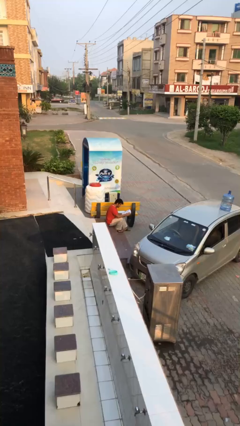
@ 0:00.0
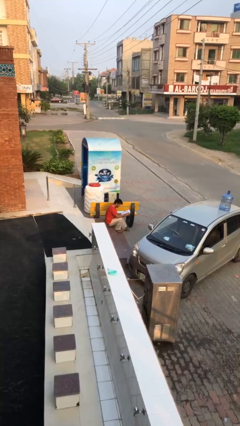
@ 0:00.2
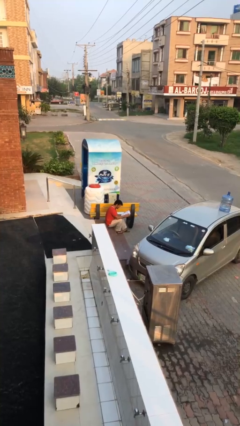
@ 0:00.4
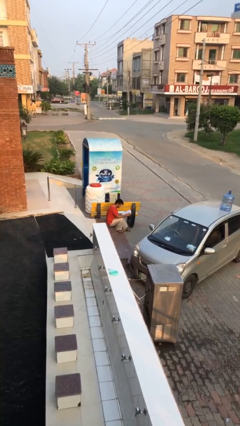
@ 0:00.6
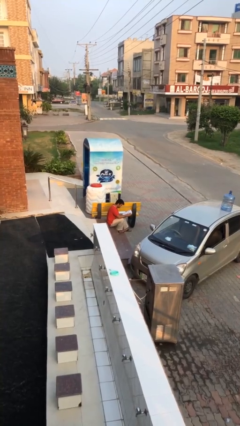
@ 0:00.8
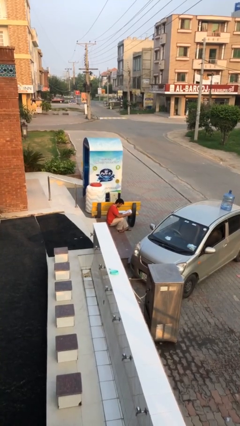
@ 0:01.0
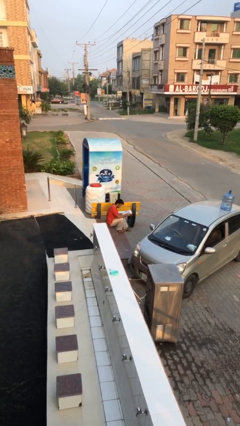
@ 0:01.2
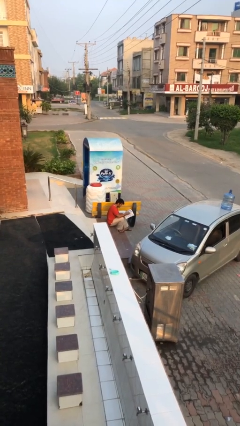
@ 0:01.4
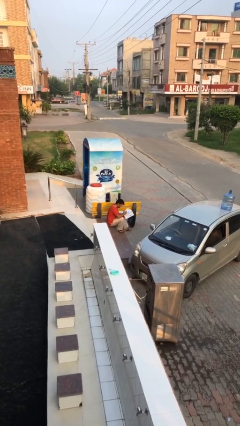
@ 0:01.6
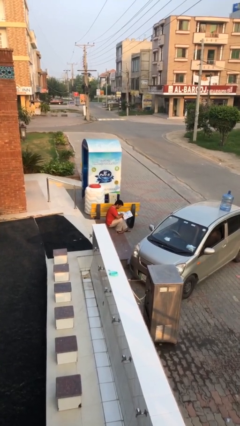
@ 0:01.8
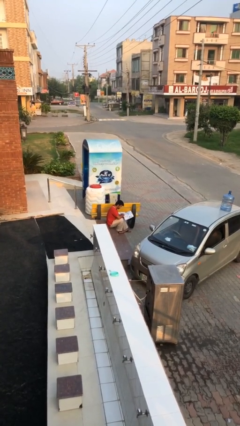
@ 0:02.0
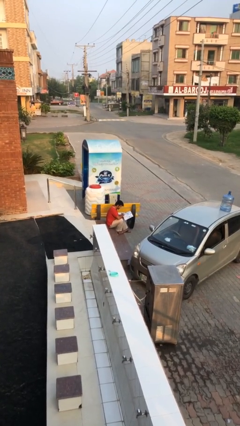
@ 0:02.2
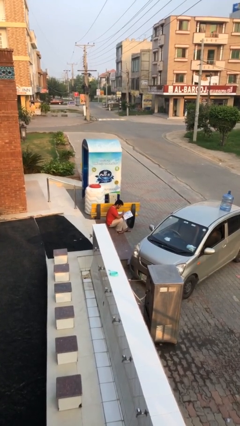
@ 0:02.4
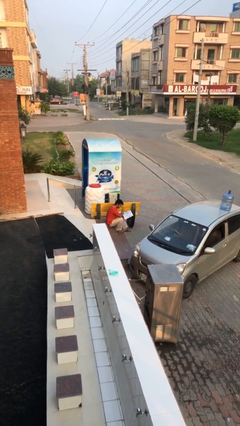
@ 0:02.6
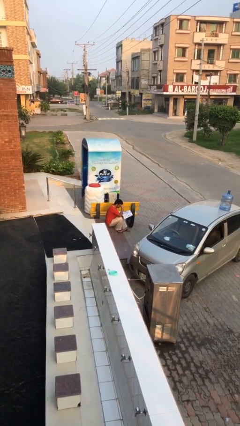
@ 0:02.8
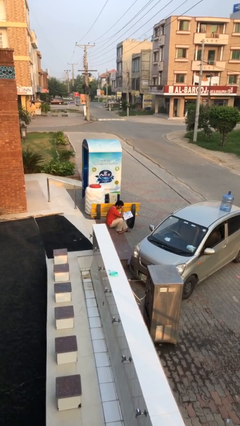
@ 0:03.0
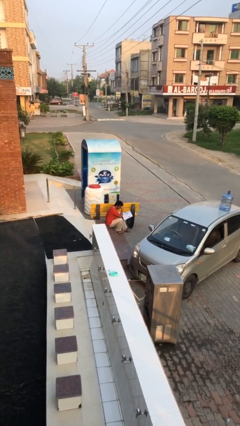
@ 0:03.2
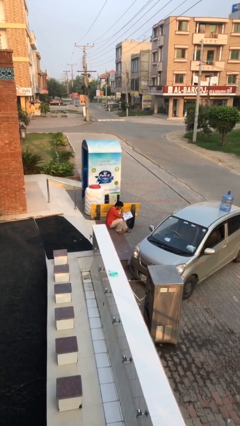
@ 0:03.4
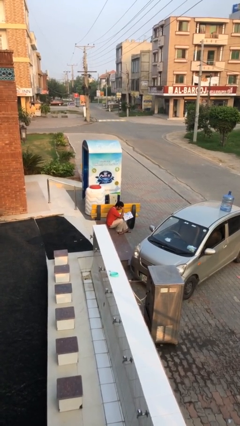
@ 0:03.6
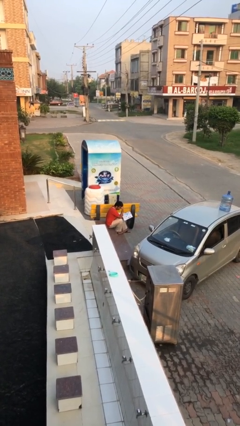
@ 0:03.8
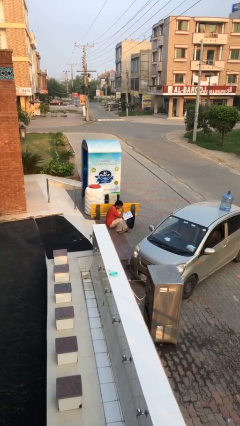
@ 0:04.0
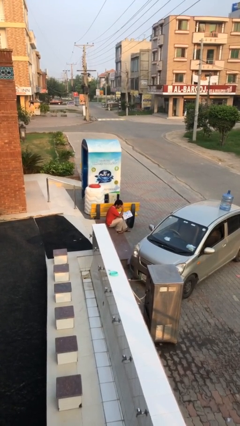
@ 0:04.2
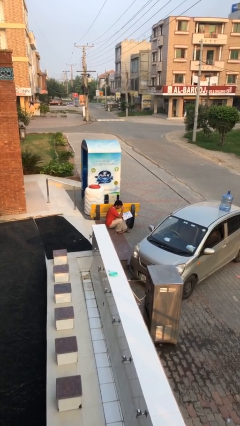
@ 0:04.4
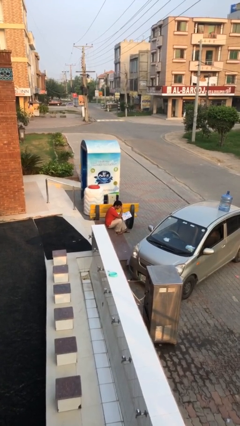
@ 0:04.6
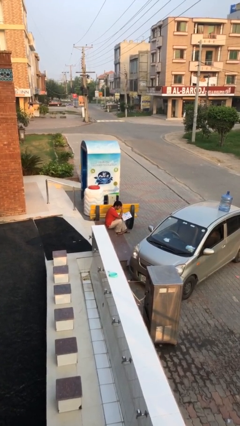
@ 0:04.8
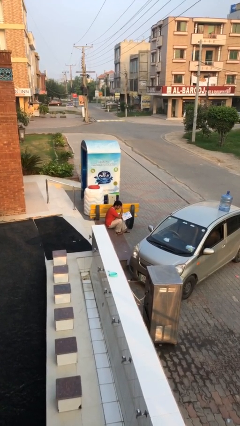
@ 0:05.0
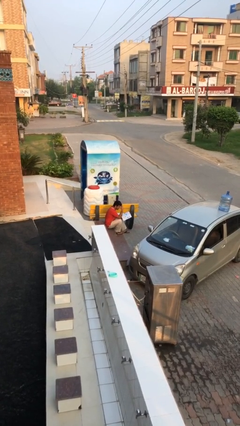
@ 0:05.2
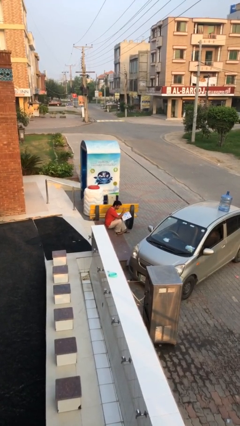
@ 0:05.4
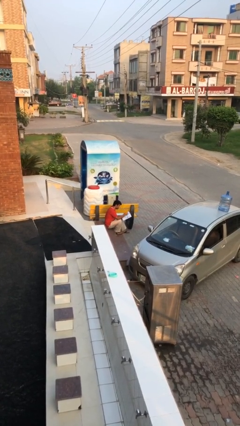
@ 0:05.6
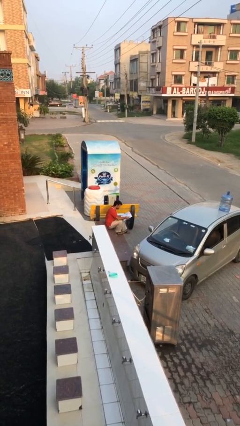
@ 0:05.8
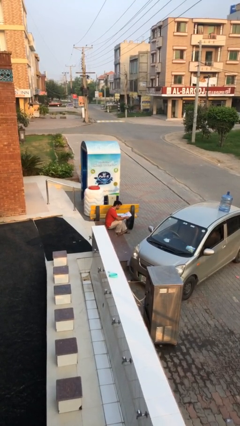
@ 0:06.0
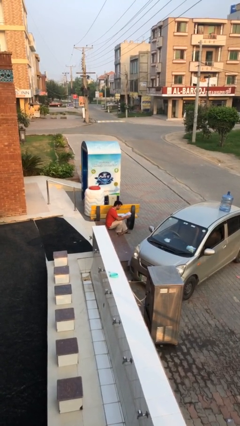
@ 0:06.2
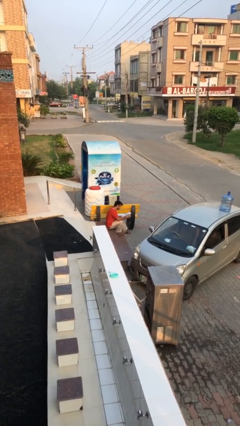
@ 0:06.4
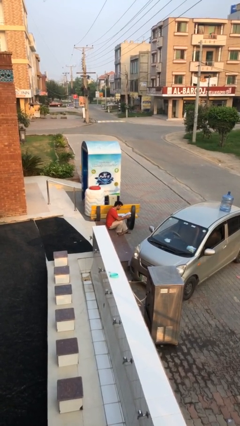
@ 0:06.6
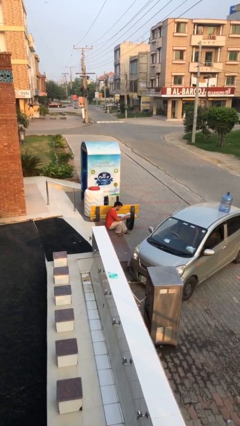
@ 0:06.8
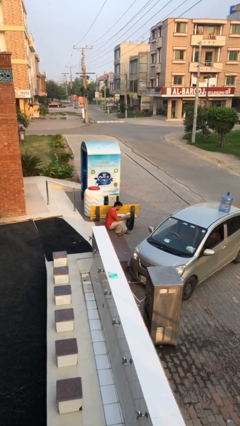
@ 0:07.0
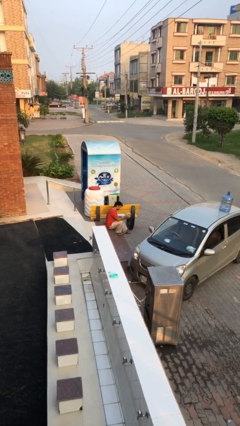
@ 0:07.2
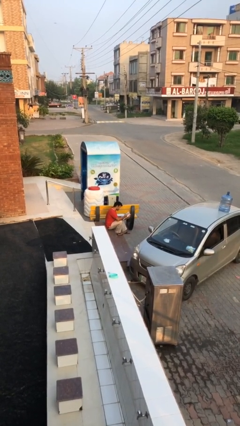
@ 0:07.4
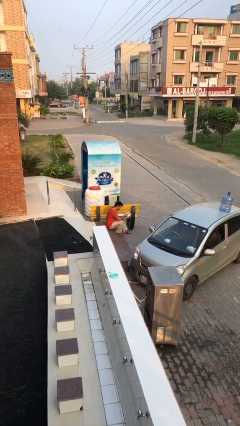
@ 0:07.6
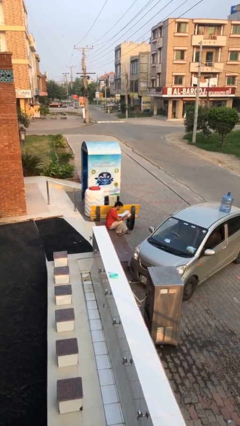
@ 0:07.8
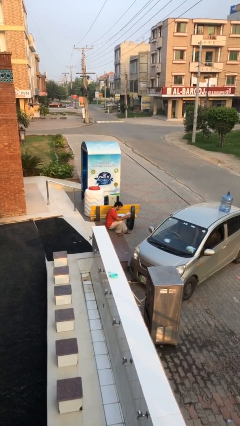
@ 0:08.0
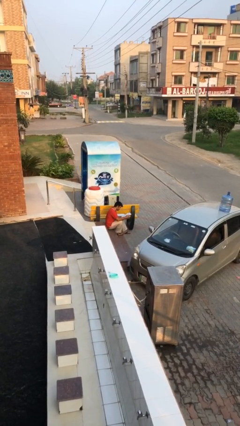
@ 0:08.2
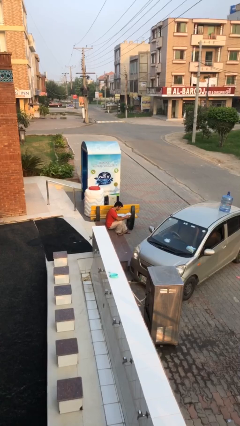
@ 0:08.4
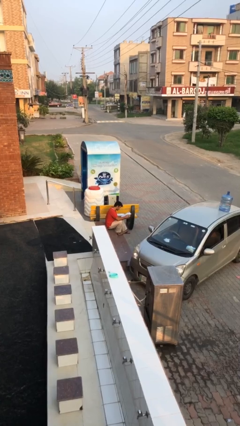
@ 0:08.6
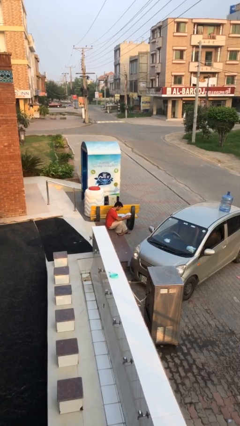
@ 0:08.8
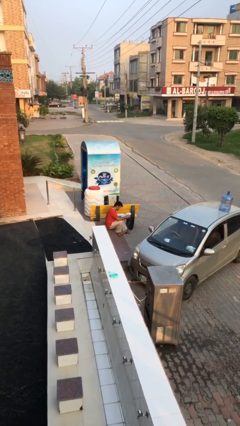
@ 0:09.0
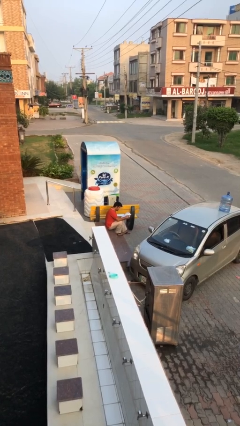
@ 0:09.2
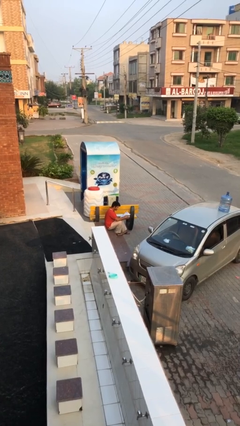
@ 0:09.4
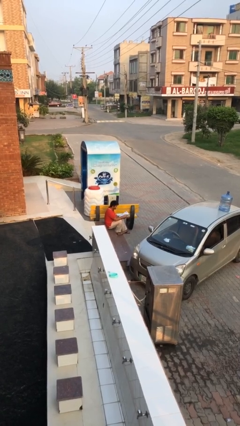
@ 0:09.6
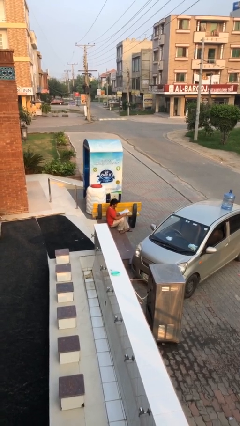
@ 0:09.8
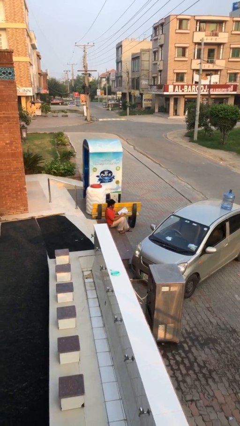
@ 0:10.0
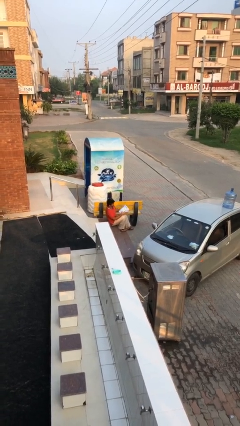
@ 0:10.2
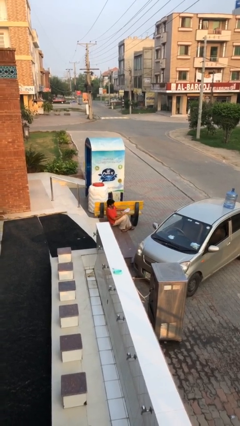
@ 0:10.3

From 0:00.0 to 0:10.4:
person reads document

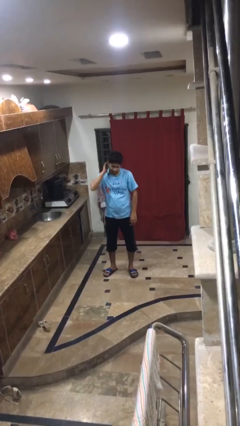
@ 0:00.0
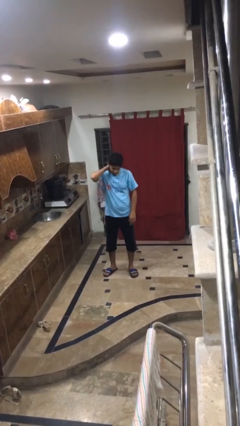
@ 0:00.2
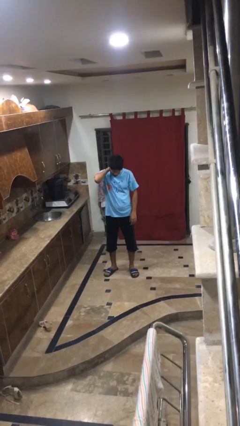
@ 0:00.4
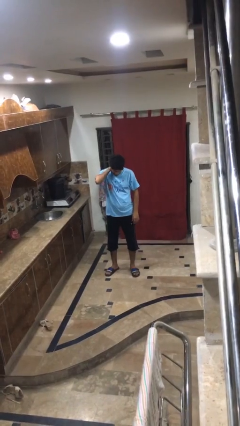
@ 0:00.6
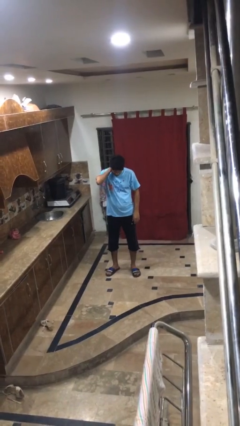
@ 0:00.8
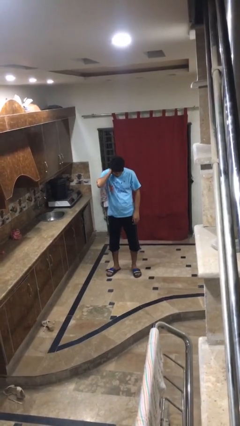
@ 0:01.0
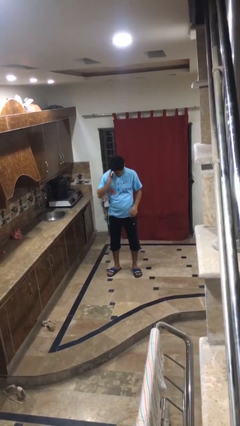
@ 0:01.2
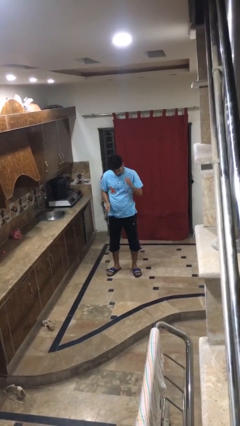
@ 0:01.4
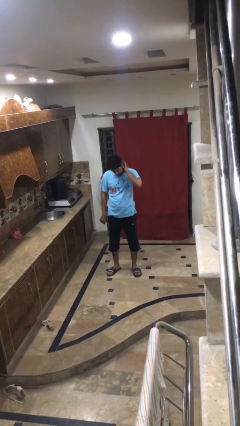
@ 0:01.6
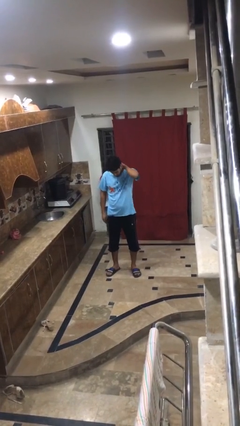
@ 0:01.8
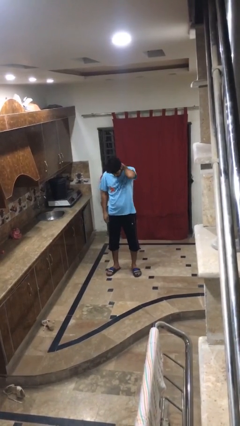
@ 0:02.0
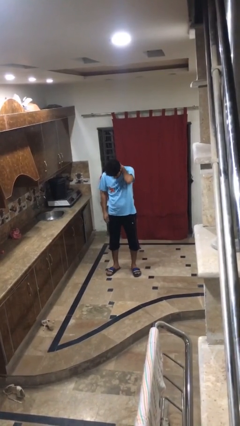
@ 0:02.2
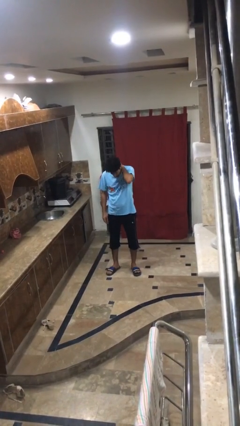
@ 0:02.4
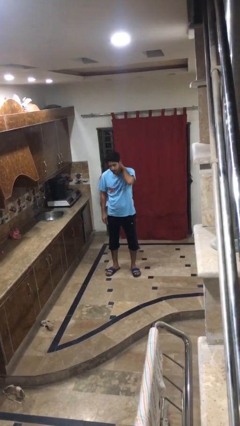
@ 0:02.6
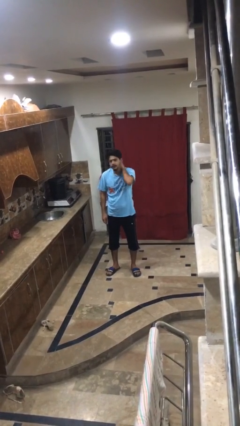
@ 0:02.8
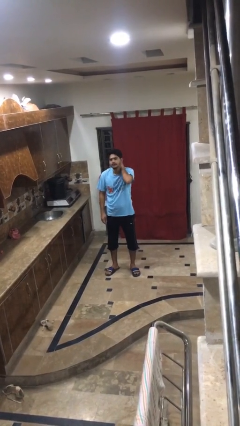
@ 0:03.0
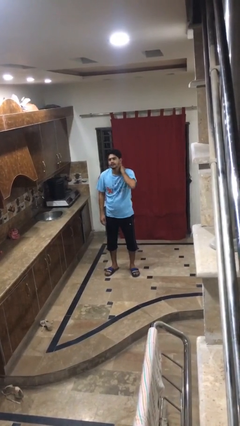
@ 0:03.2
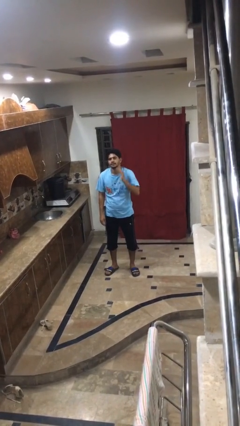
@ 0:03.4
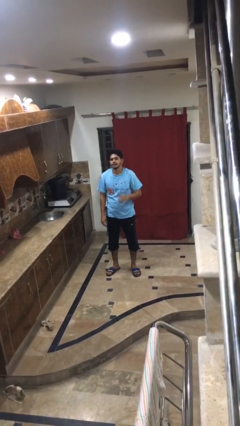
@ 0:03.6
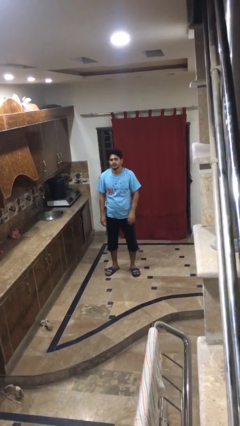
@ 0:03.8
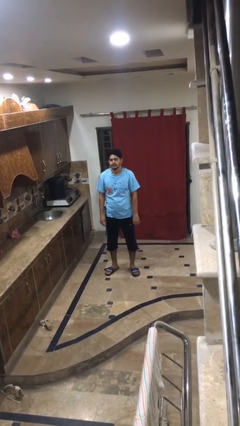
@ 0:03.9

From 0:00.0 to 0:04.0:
person rubs neck

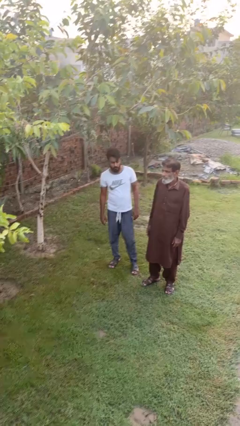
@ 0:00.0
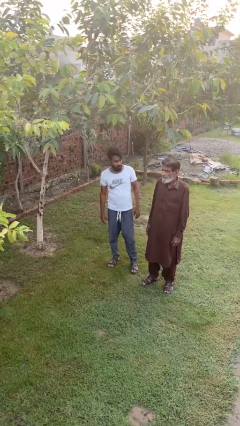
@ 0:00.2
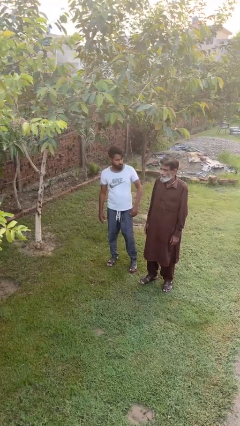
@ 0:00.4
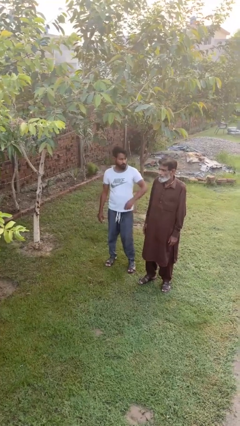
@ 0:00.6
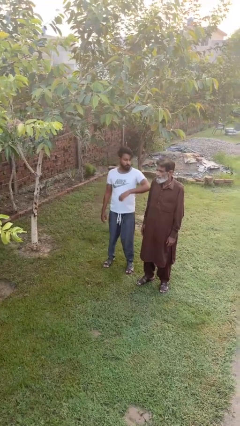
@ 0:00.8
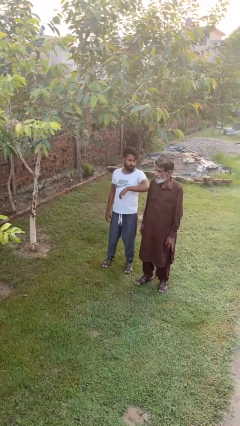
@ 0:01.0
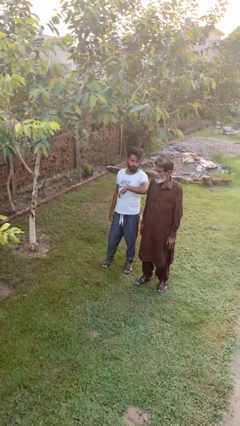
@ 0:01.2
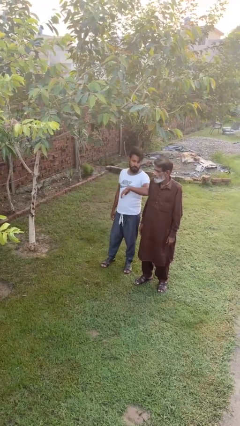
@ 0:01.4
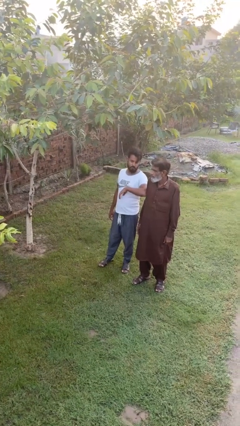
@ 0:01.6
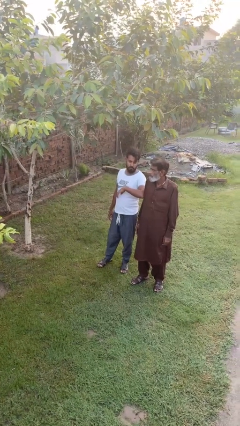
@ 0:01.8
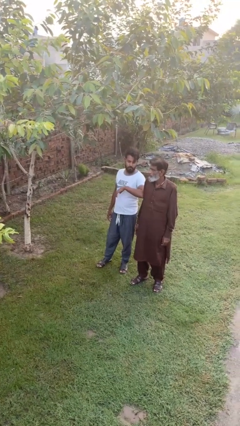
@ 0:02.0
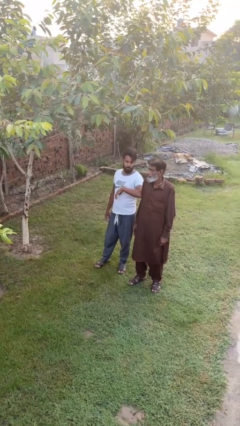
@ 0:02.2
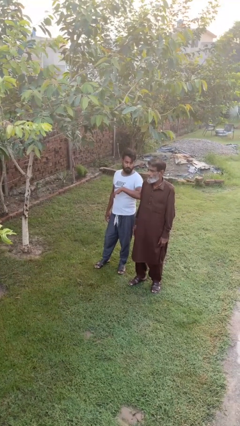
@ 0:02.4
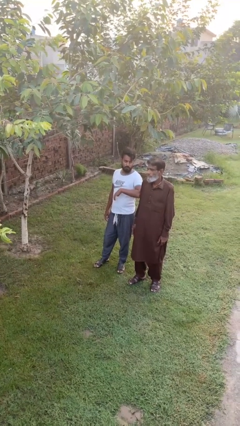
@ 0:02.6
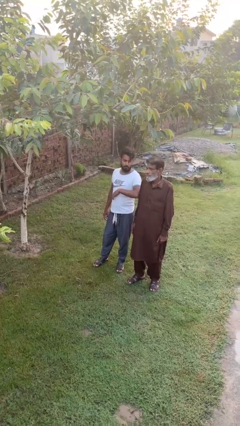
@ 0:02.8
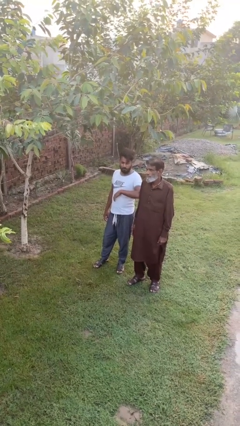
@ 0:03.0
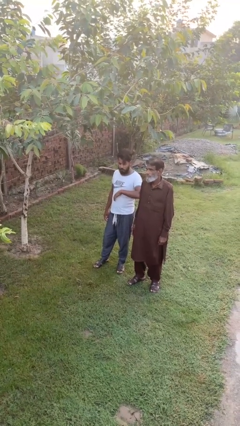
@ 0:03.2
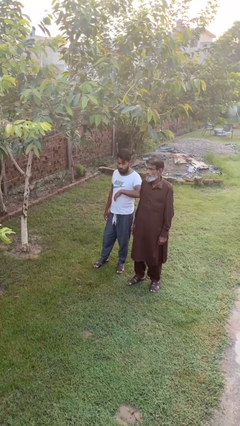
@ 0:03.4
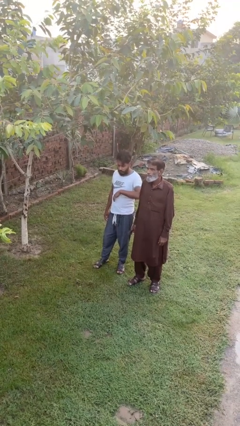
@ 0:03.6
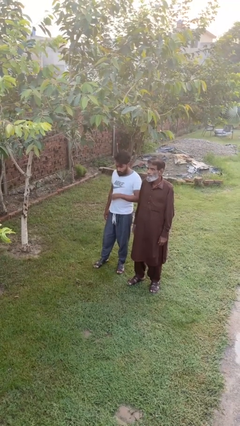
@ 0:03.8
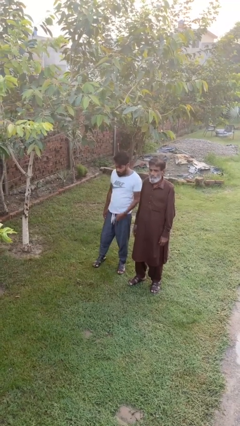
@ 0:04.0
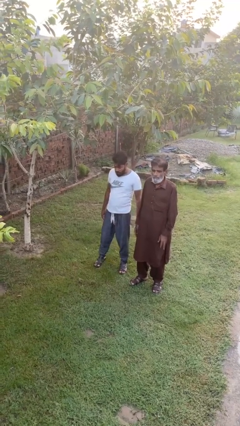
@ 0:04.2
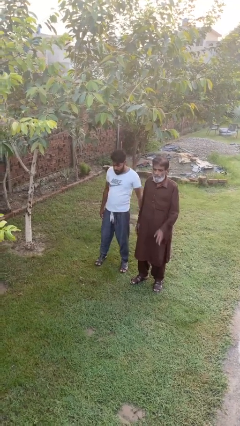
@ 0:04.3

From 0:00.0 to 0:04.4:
person nudges person with elbow
